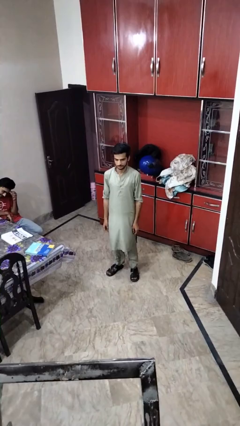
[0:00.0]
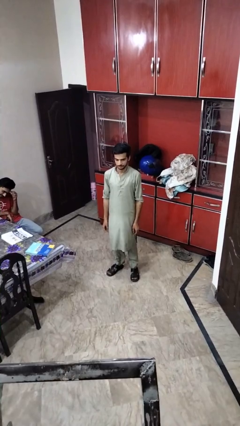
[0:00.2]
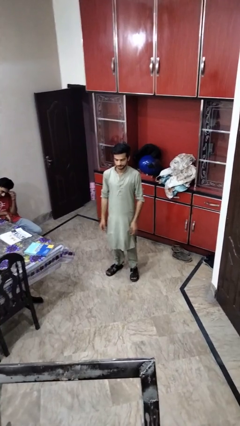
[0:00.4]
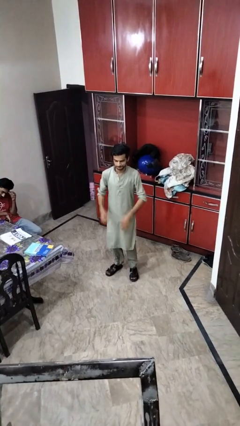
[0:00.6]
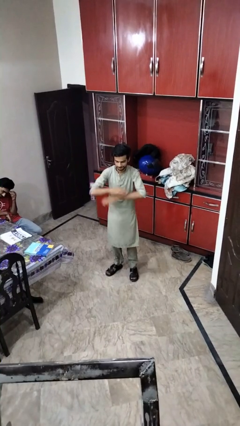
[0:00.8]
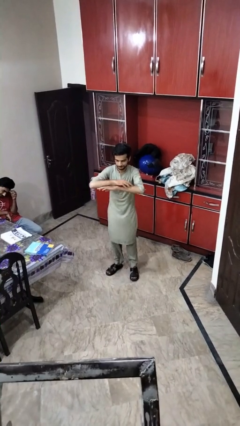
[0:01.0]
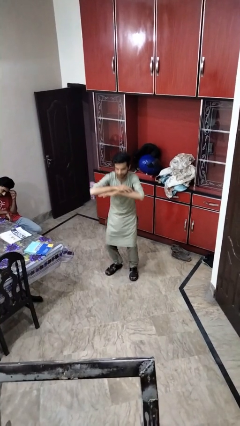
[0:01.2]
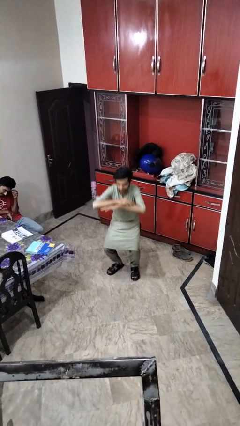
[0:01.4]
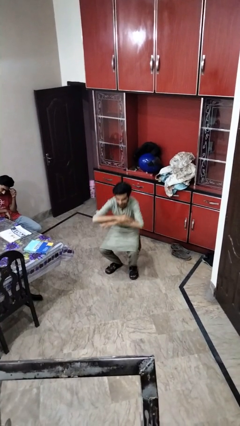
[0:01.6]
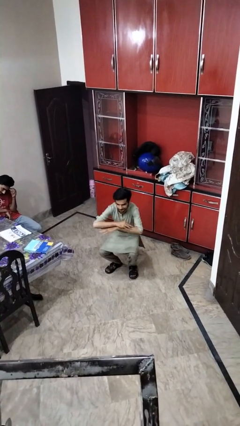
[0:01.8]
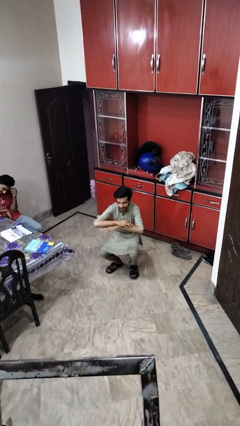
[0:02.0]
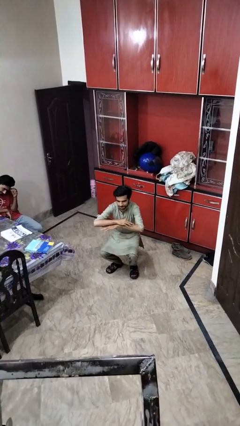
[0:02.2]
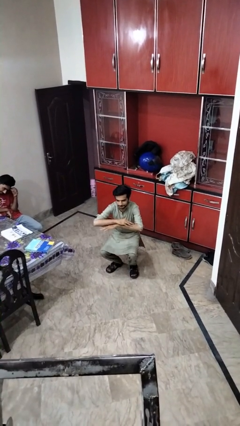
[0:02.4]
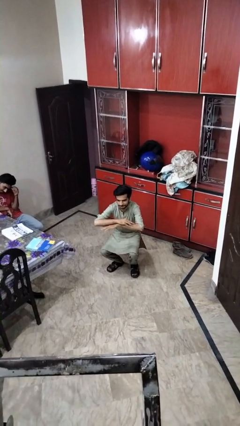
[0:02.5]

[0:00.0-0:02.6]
person squats

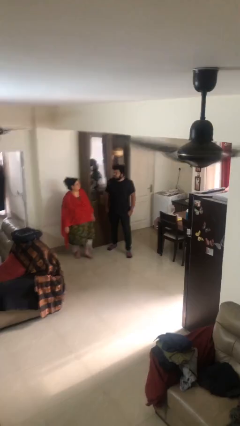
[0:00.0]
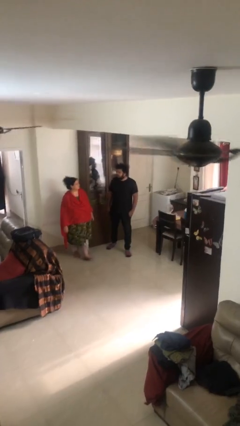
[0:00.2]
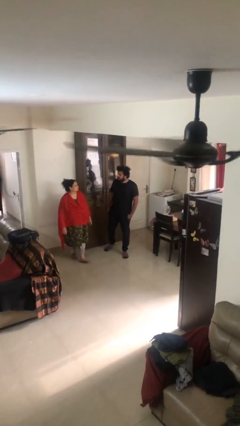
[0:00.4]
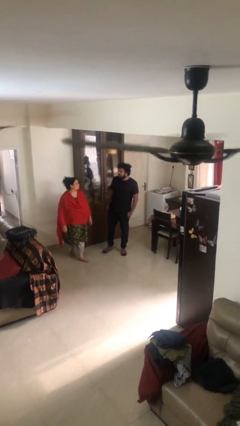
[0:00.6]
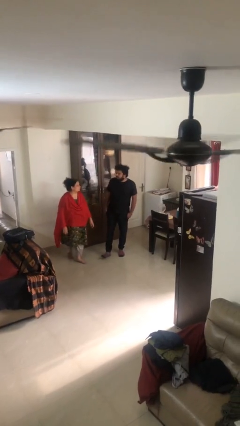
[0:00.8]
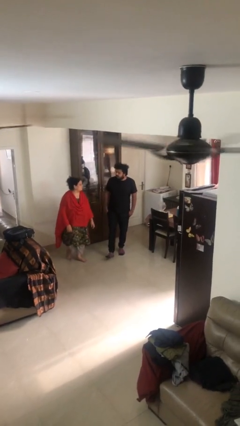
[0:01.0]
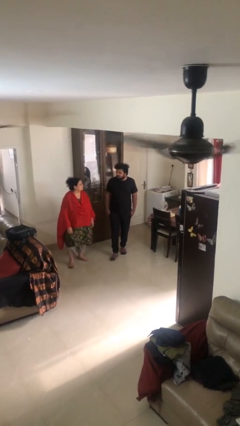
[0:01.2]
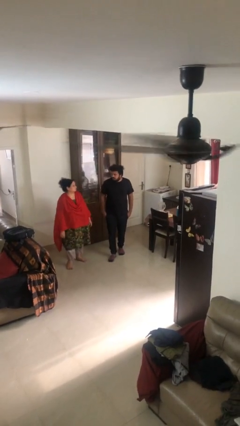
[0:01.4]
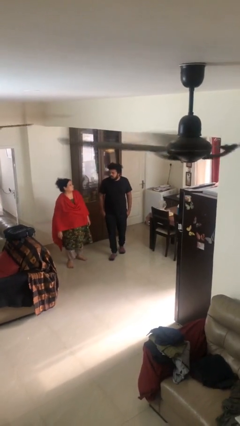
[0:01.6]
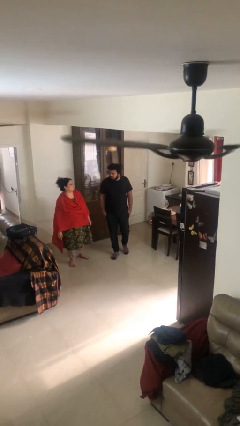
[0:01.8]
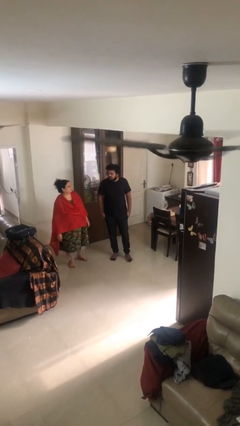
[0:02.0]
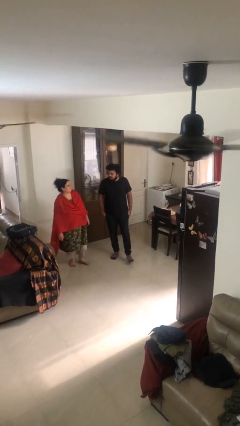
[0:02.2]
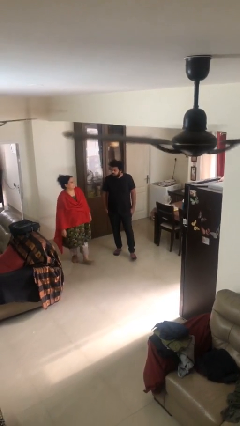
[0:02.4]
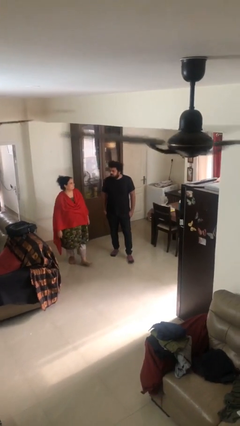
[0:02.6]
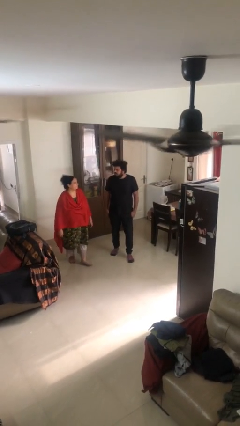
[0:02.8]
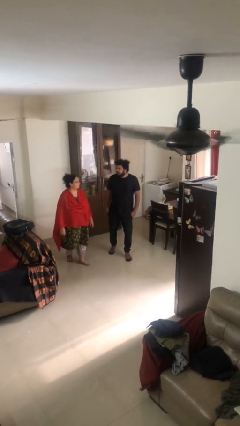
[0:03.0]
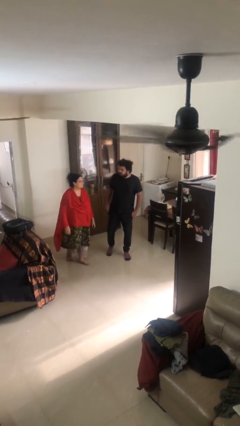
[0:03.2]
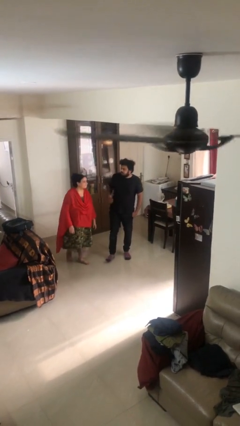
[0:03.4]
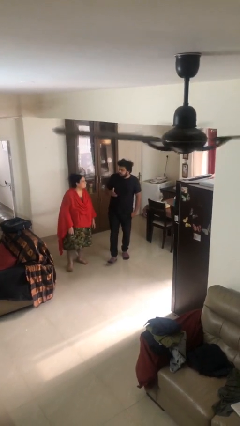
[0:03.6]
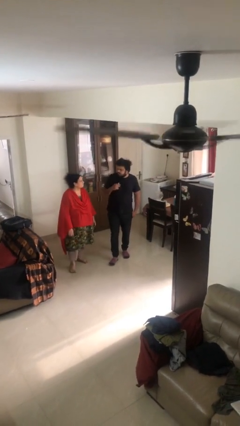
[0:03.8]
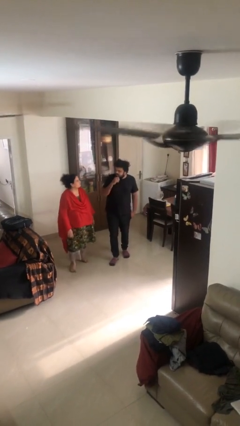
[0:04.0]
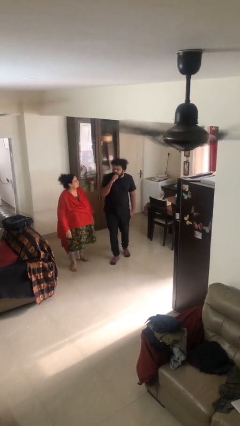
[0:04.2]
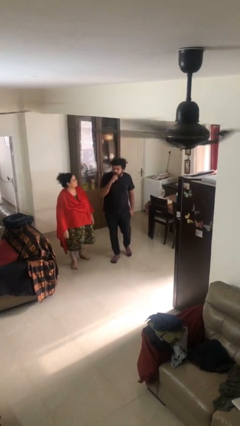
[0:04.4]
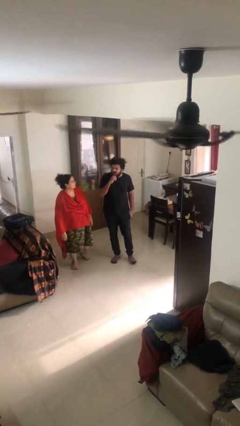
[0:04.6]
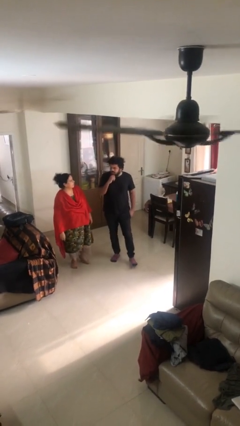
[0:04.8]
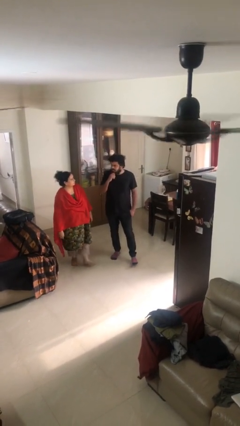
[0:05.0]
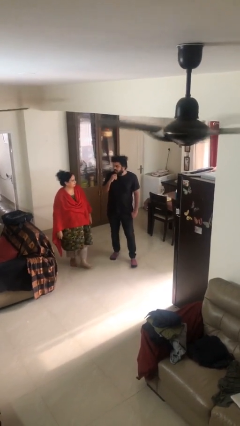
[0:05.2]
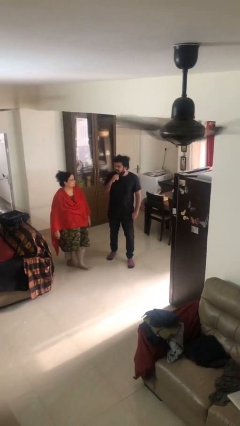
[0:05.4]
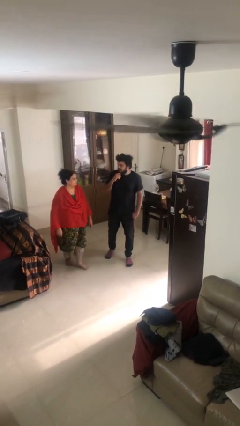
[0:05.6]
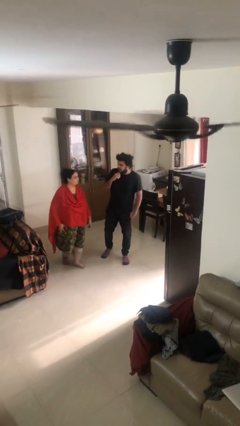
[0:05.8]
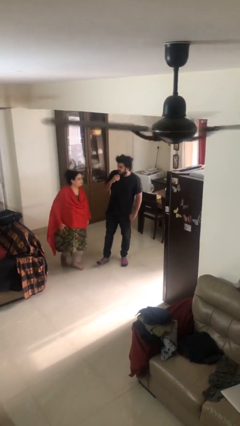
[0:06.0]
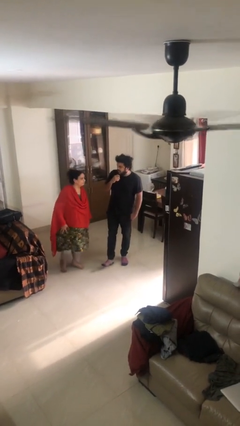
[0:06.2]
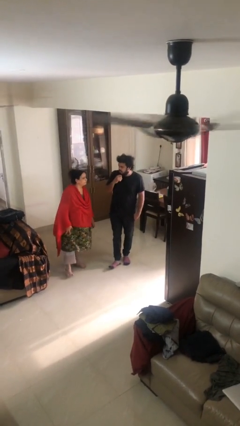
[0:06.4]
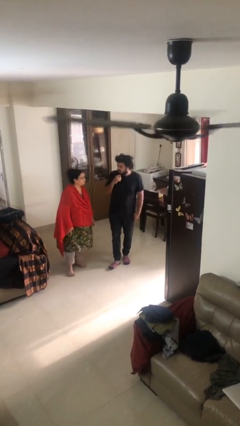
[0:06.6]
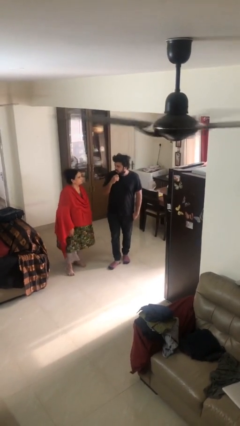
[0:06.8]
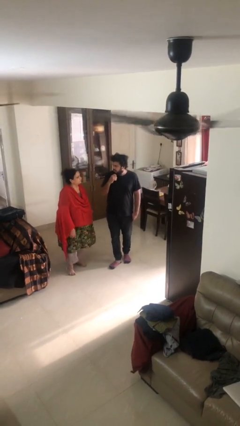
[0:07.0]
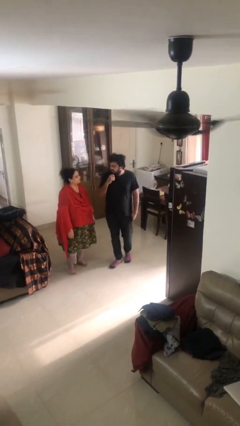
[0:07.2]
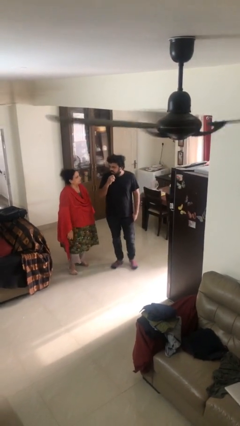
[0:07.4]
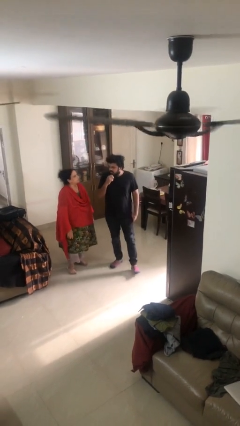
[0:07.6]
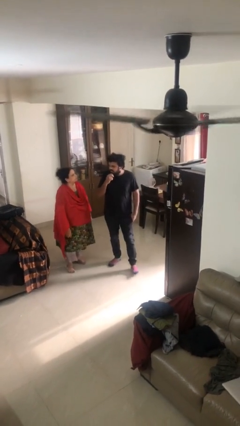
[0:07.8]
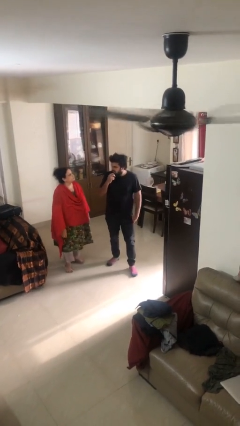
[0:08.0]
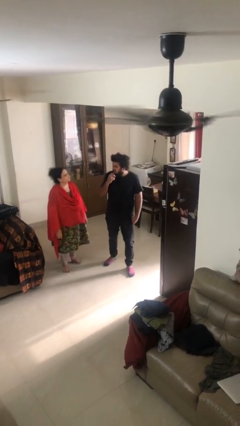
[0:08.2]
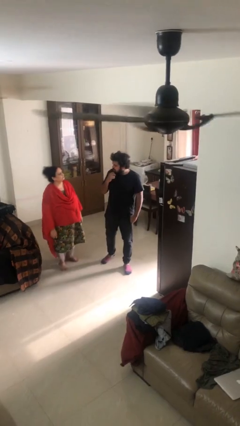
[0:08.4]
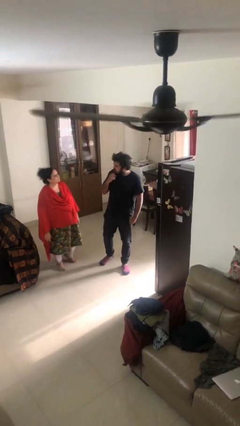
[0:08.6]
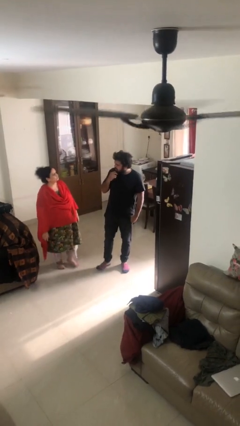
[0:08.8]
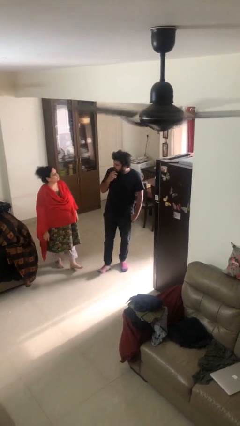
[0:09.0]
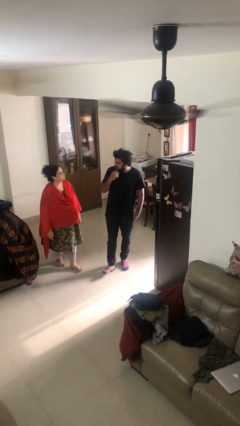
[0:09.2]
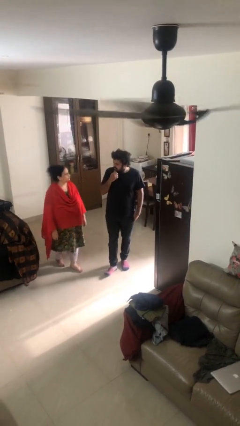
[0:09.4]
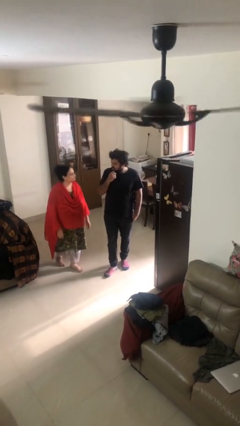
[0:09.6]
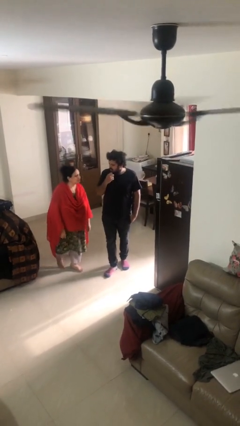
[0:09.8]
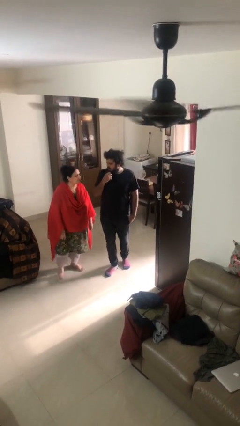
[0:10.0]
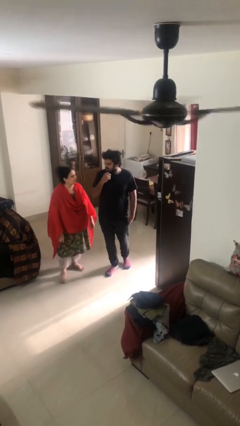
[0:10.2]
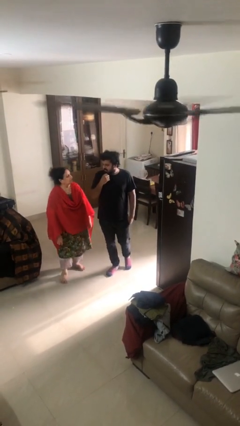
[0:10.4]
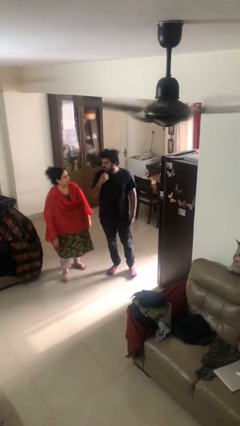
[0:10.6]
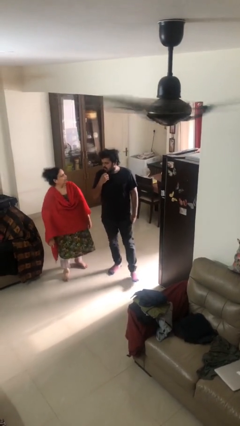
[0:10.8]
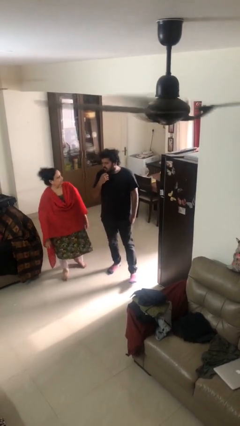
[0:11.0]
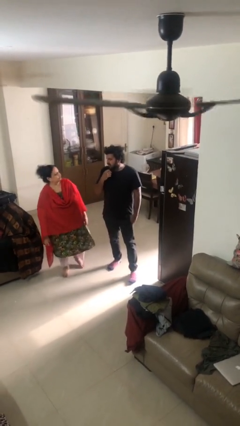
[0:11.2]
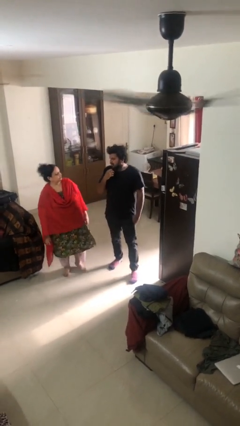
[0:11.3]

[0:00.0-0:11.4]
person talks to person

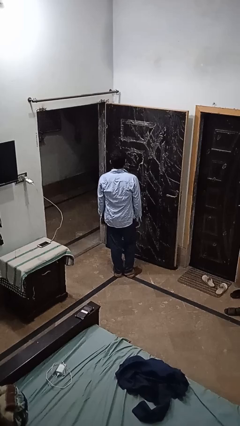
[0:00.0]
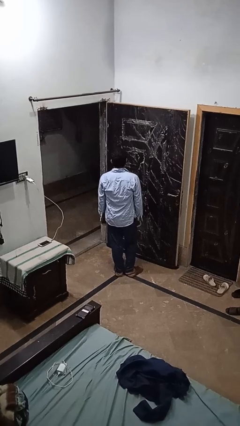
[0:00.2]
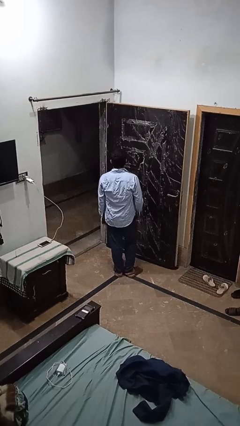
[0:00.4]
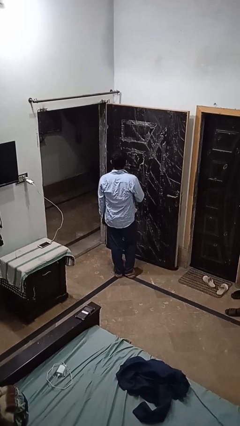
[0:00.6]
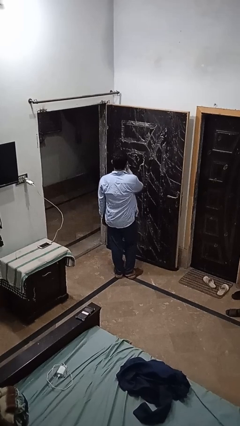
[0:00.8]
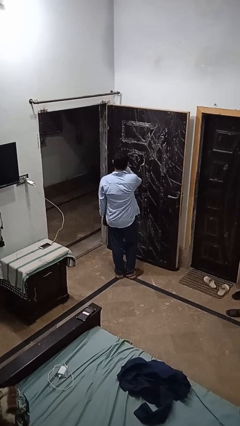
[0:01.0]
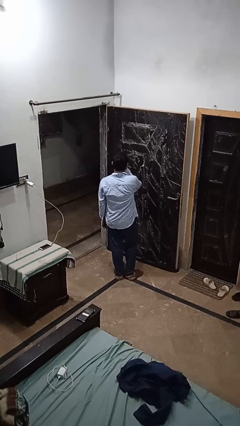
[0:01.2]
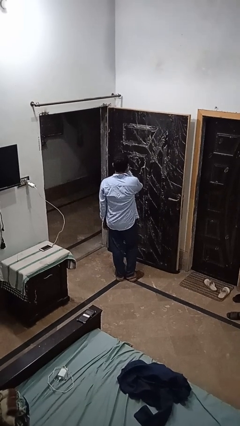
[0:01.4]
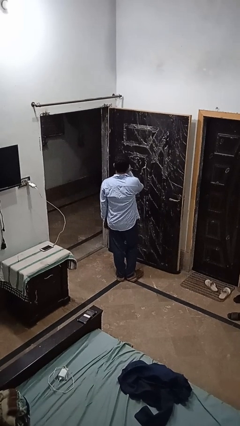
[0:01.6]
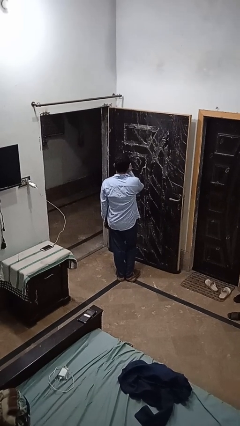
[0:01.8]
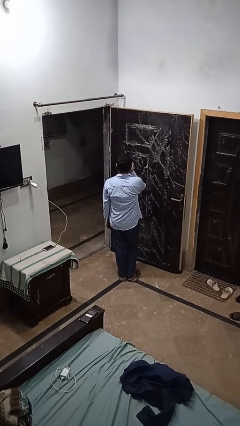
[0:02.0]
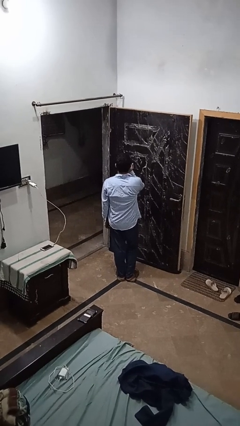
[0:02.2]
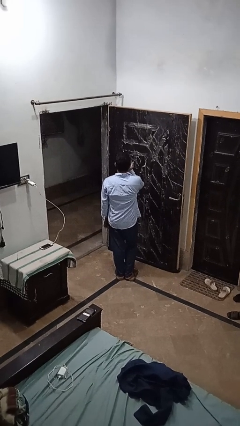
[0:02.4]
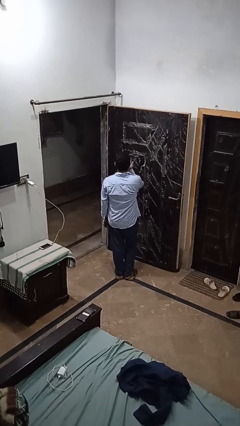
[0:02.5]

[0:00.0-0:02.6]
person licks fingers

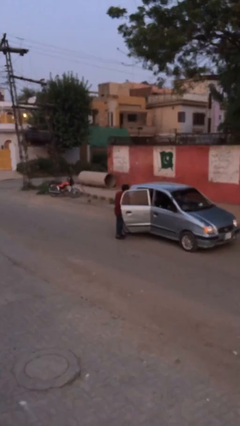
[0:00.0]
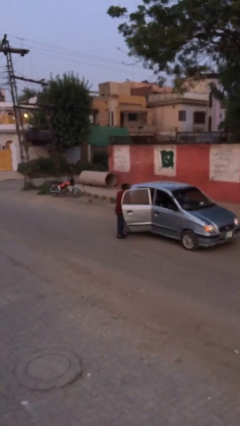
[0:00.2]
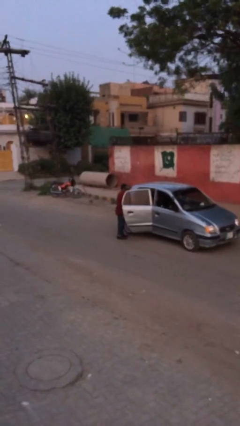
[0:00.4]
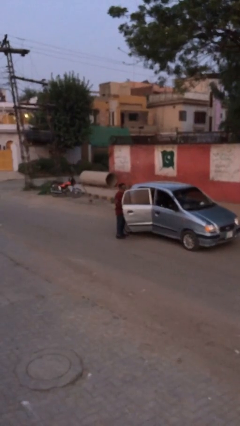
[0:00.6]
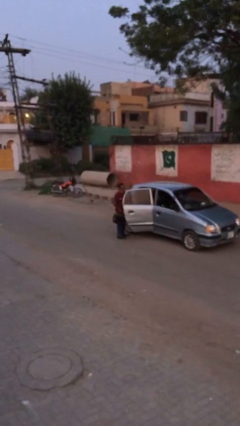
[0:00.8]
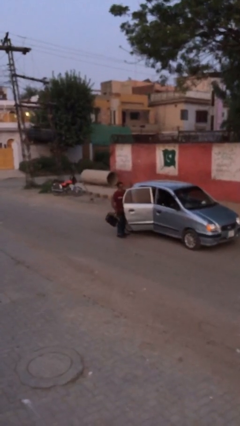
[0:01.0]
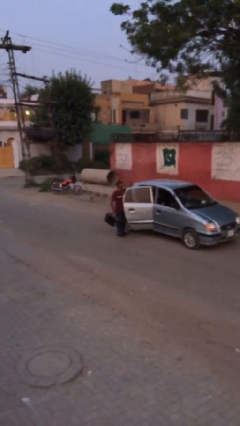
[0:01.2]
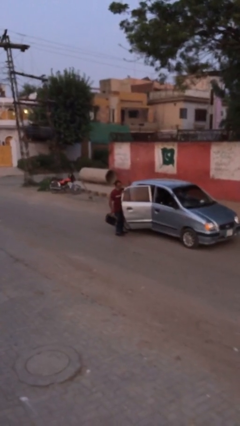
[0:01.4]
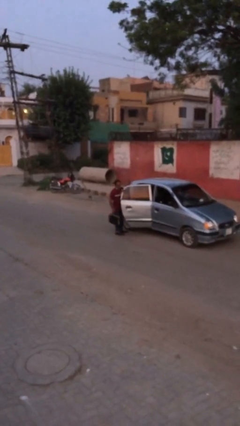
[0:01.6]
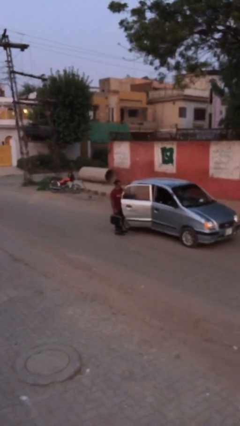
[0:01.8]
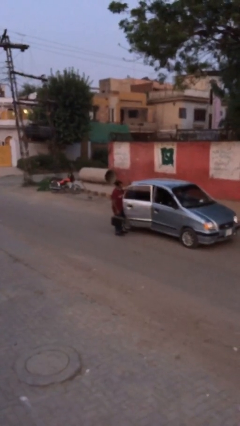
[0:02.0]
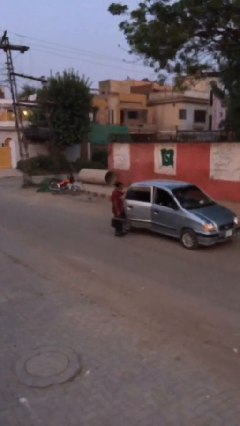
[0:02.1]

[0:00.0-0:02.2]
person unloads car
